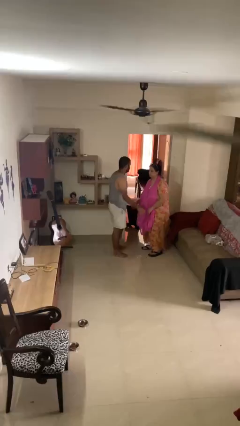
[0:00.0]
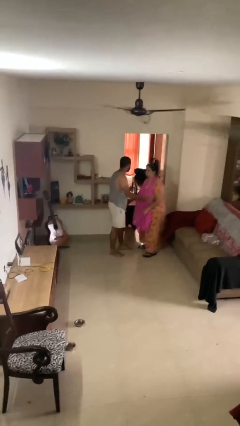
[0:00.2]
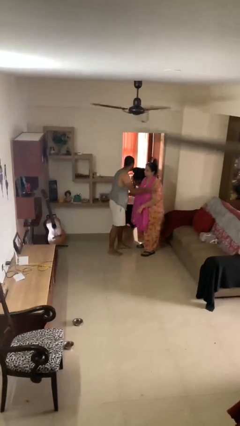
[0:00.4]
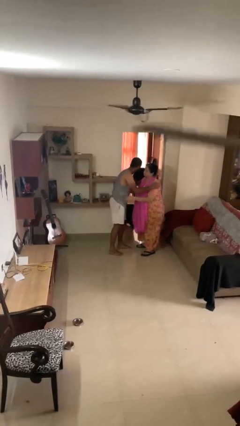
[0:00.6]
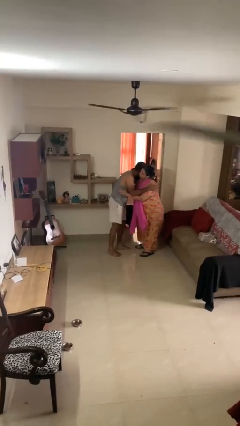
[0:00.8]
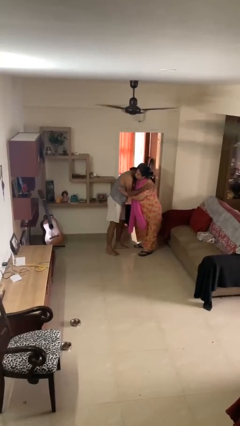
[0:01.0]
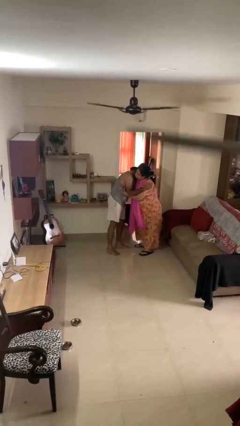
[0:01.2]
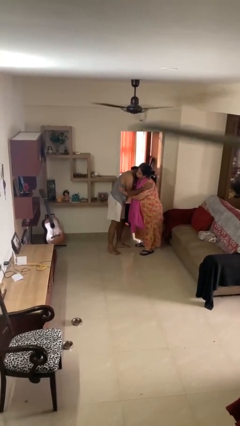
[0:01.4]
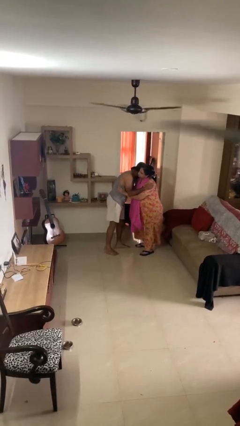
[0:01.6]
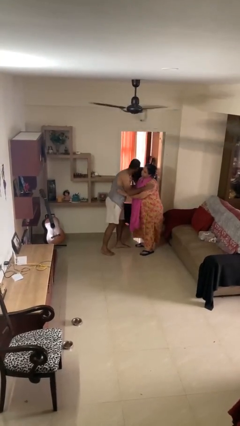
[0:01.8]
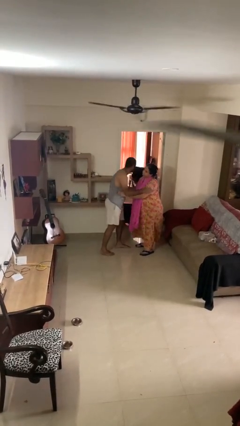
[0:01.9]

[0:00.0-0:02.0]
person embraces person

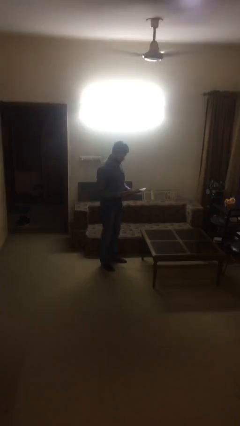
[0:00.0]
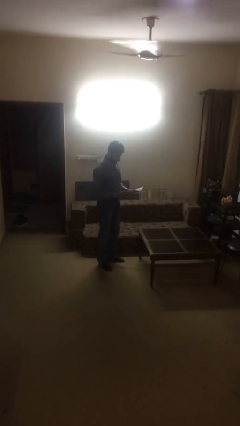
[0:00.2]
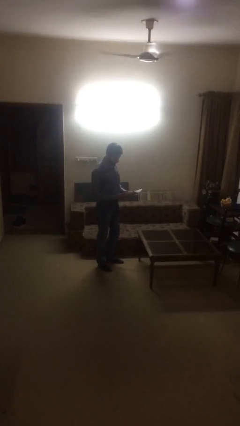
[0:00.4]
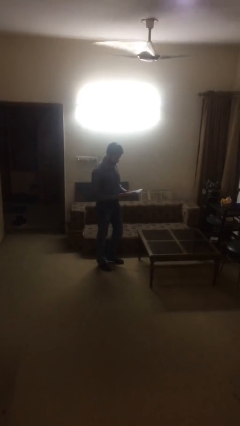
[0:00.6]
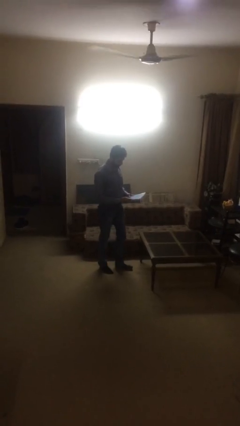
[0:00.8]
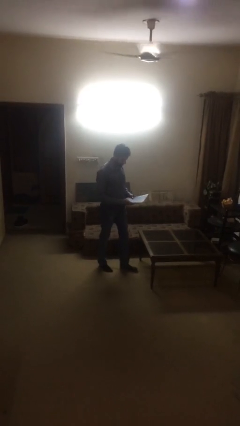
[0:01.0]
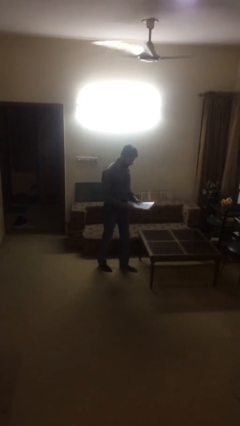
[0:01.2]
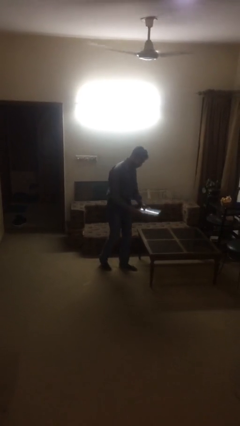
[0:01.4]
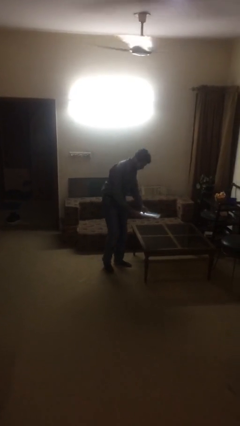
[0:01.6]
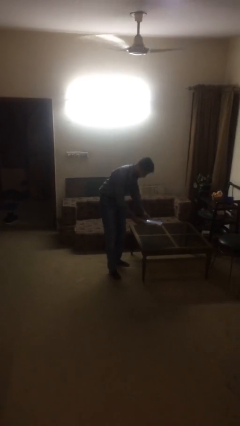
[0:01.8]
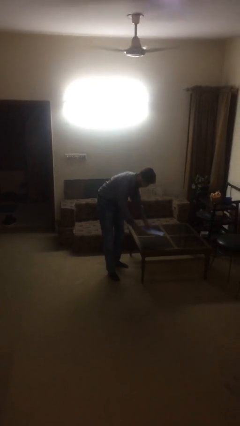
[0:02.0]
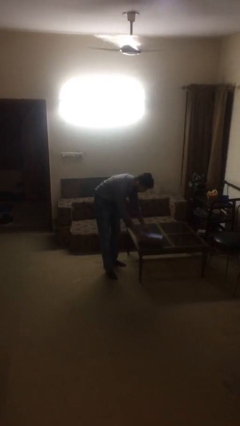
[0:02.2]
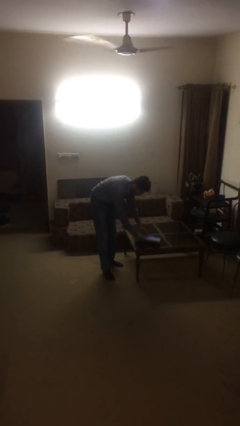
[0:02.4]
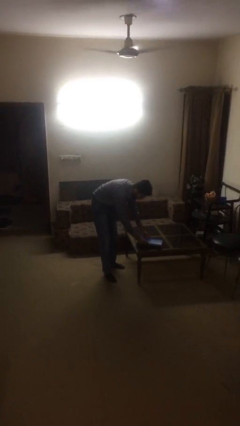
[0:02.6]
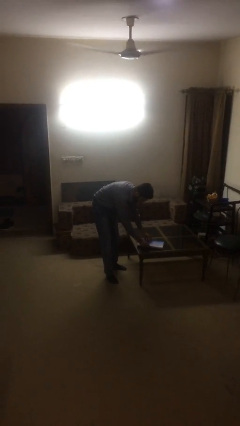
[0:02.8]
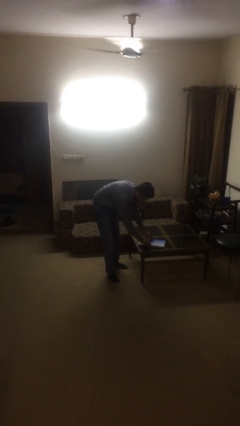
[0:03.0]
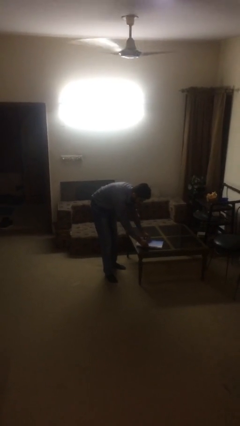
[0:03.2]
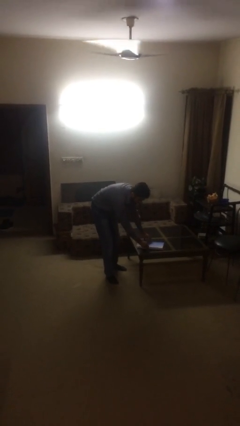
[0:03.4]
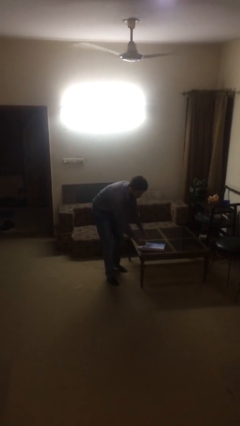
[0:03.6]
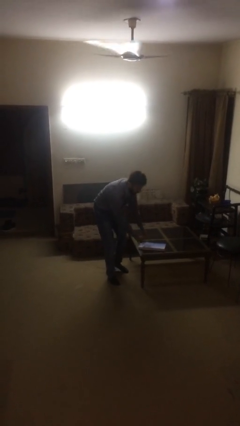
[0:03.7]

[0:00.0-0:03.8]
person puts down object on table

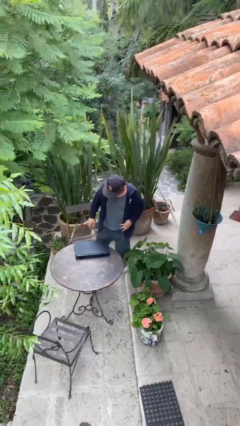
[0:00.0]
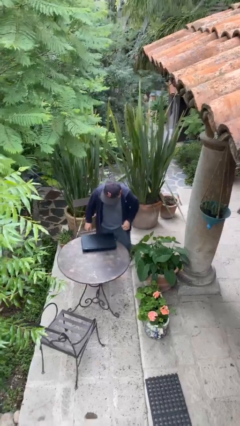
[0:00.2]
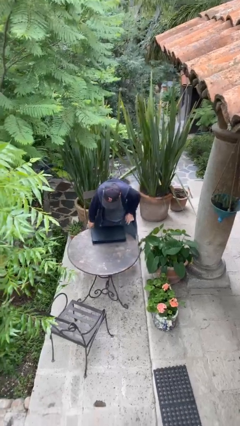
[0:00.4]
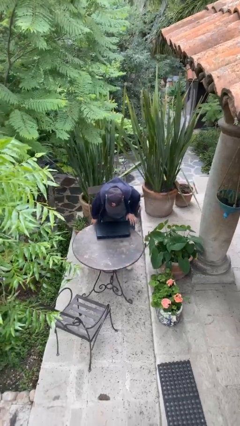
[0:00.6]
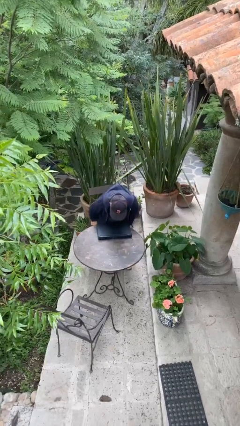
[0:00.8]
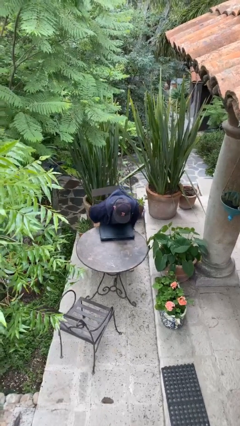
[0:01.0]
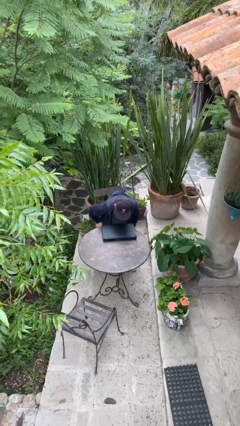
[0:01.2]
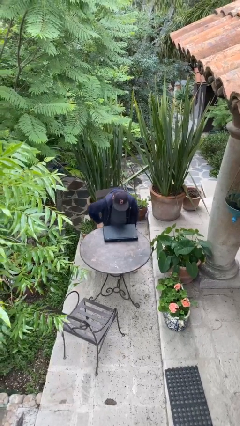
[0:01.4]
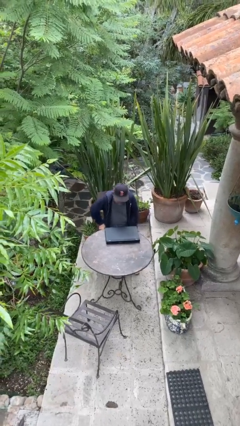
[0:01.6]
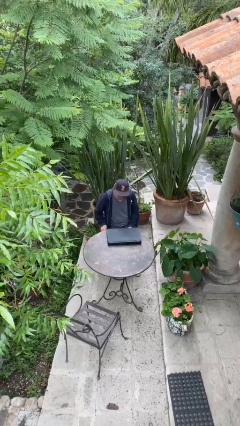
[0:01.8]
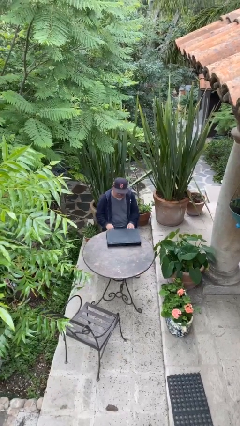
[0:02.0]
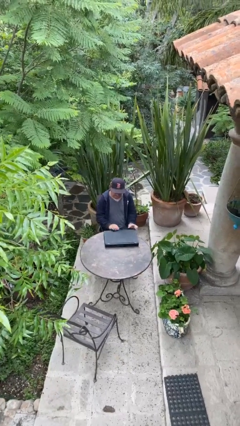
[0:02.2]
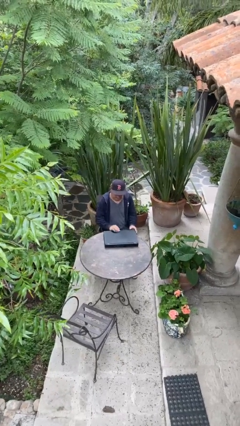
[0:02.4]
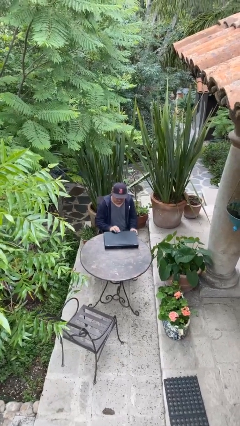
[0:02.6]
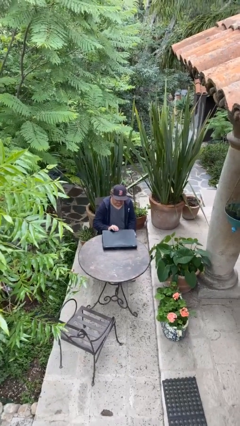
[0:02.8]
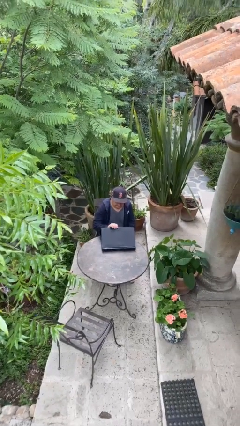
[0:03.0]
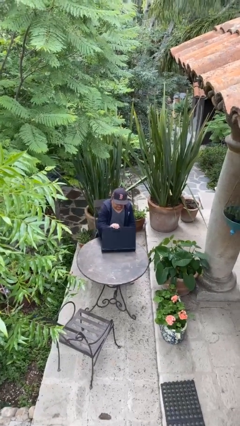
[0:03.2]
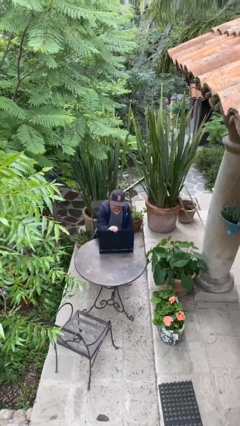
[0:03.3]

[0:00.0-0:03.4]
person sits down

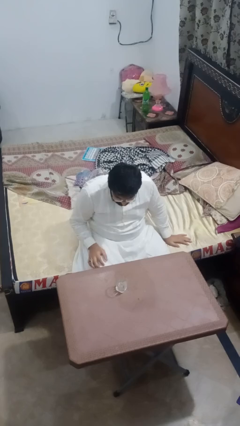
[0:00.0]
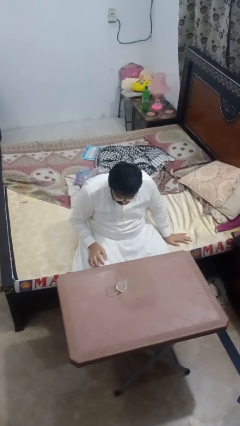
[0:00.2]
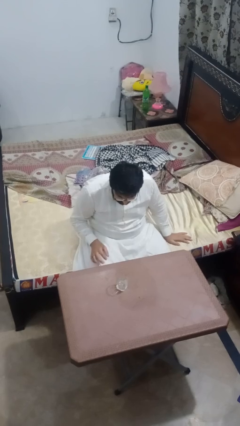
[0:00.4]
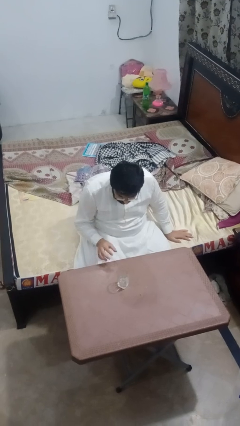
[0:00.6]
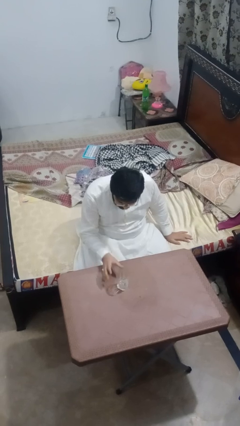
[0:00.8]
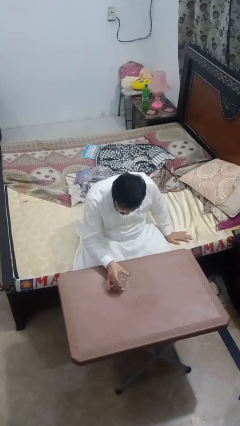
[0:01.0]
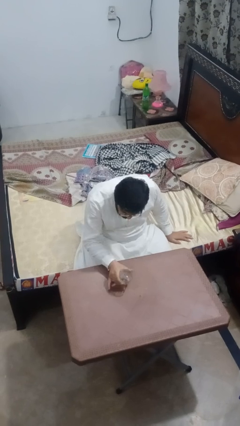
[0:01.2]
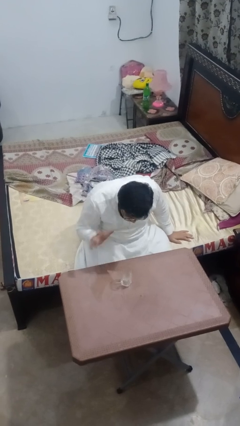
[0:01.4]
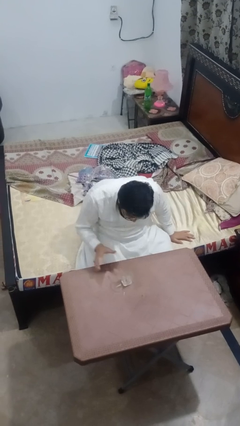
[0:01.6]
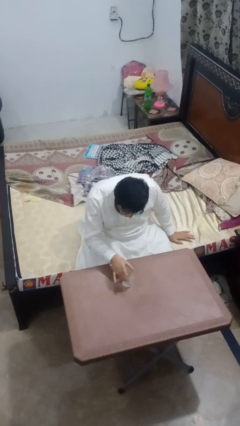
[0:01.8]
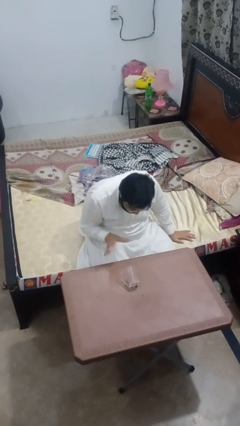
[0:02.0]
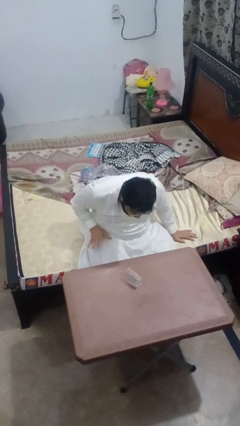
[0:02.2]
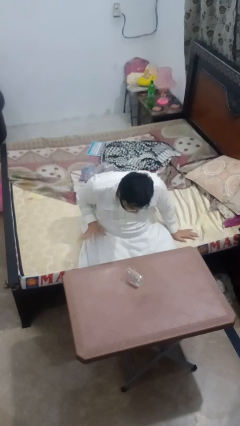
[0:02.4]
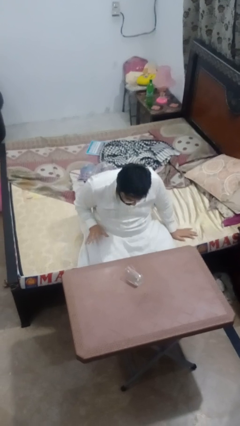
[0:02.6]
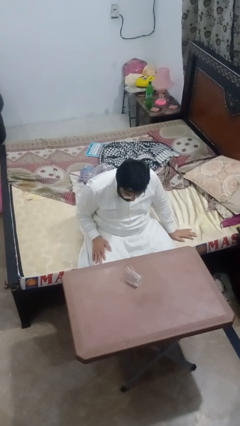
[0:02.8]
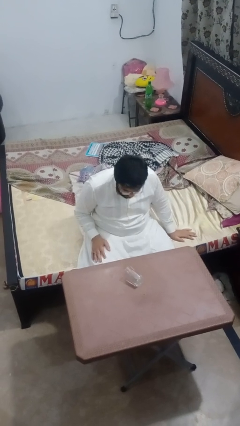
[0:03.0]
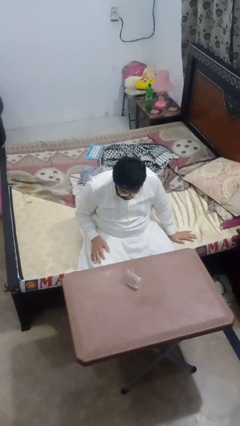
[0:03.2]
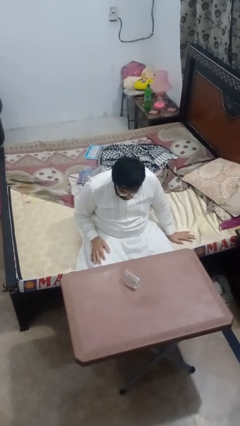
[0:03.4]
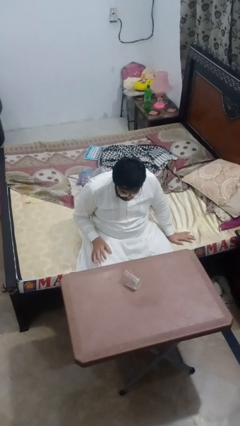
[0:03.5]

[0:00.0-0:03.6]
person knocks over glass

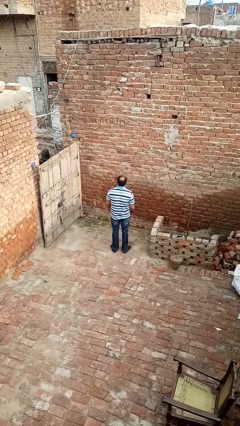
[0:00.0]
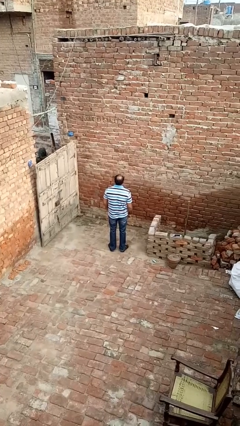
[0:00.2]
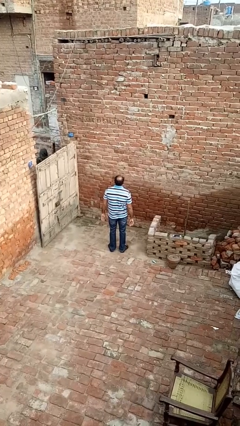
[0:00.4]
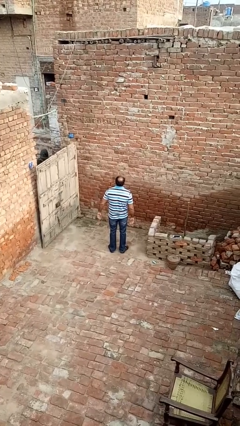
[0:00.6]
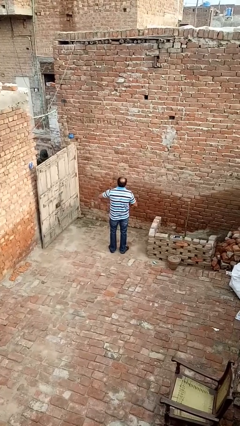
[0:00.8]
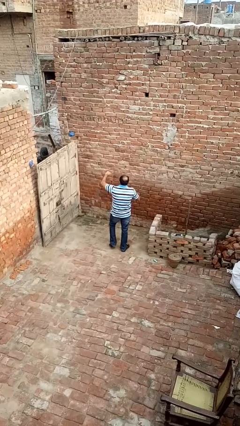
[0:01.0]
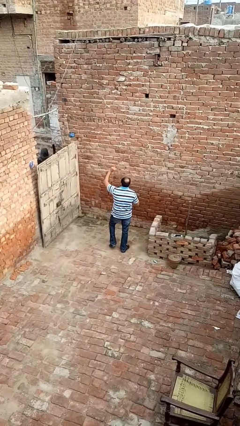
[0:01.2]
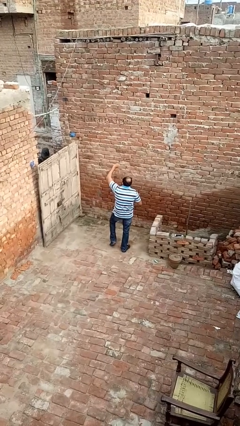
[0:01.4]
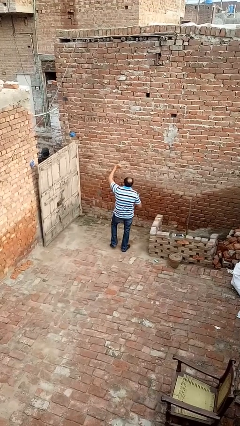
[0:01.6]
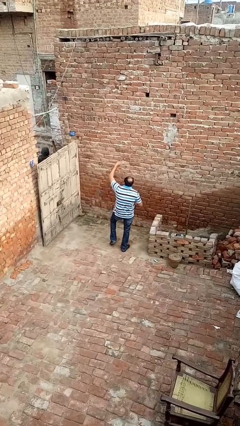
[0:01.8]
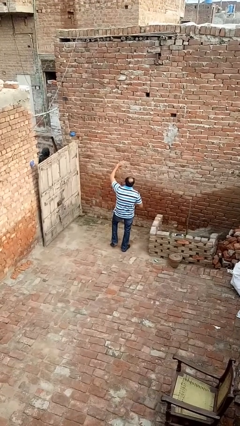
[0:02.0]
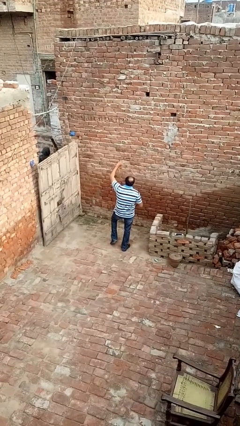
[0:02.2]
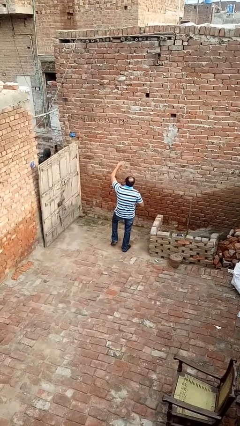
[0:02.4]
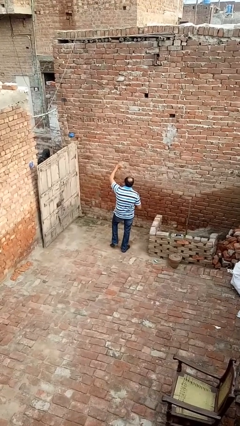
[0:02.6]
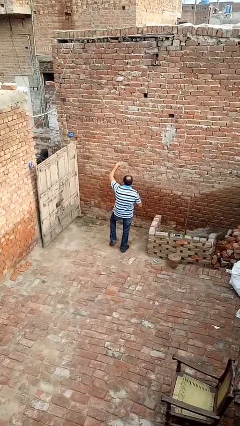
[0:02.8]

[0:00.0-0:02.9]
person dances in place

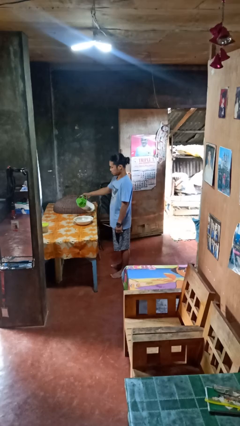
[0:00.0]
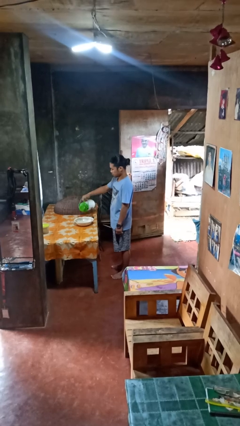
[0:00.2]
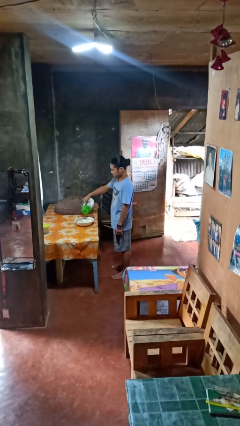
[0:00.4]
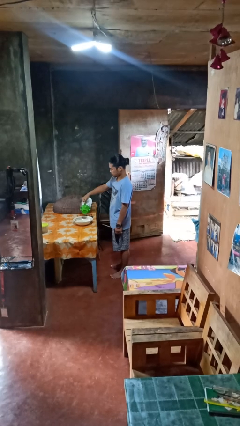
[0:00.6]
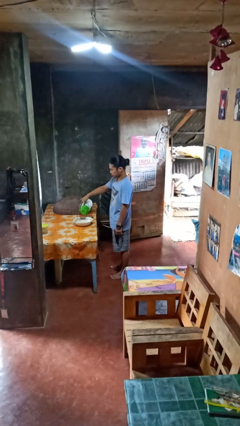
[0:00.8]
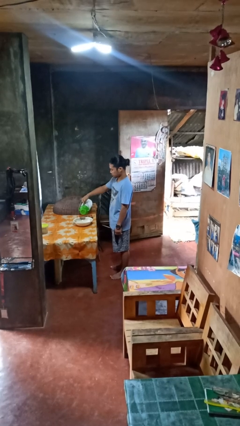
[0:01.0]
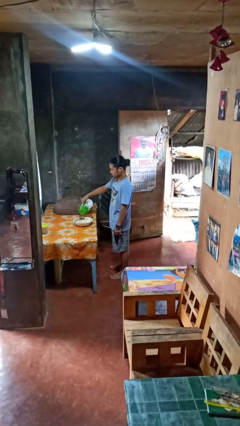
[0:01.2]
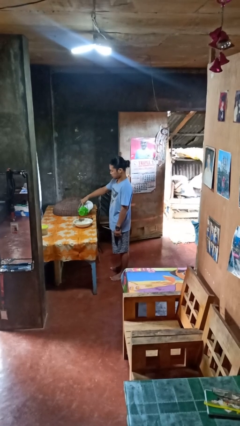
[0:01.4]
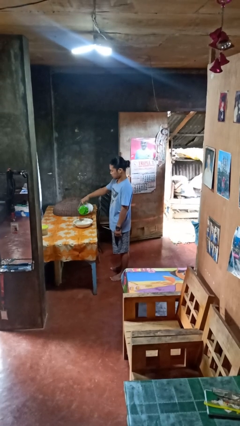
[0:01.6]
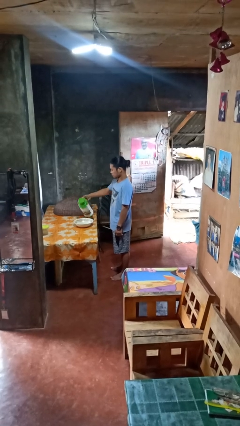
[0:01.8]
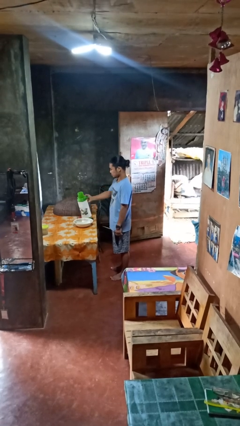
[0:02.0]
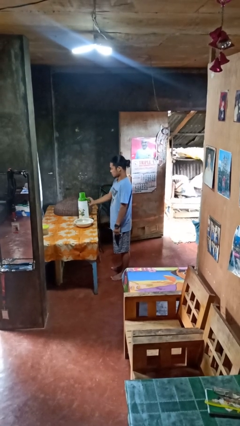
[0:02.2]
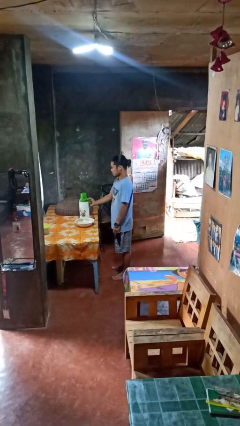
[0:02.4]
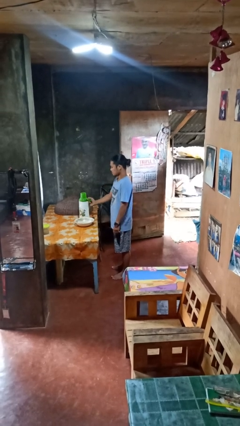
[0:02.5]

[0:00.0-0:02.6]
person pours into bowl
